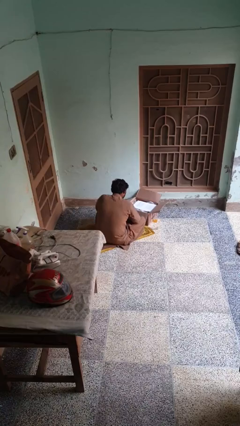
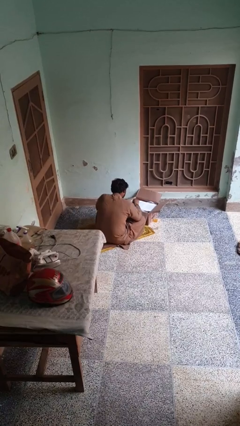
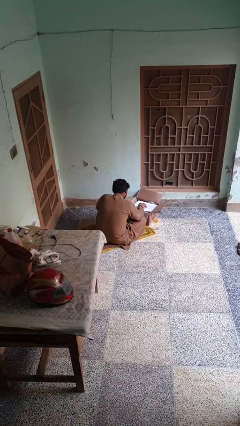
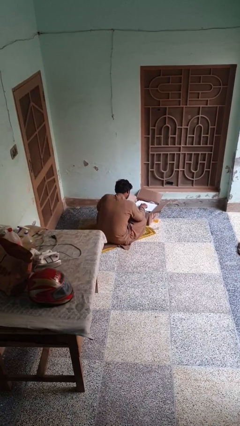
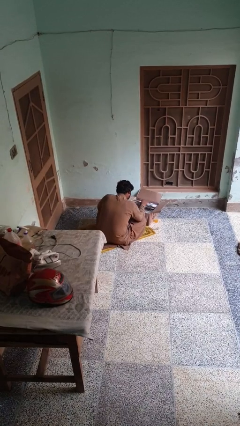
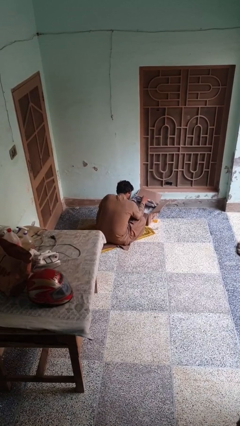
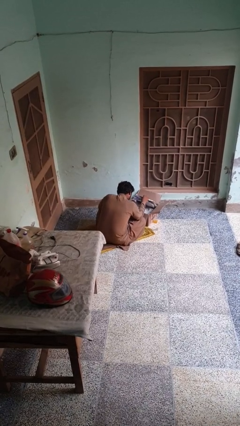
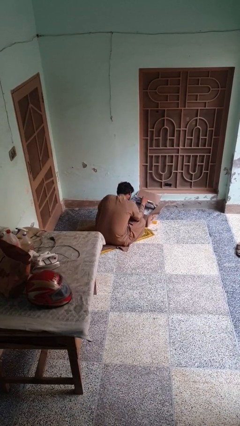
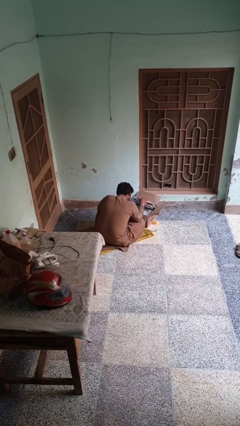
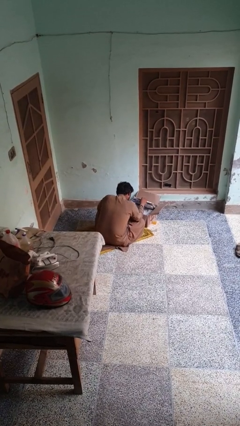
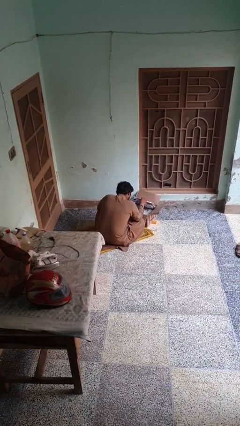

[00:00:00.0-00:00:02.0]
person searches in box

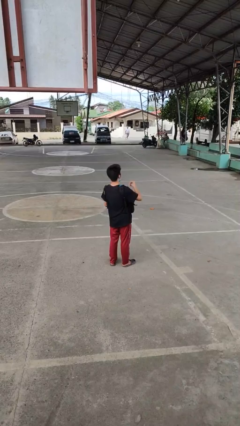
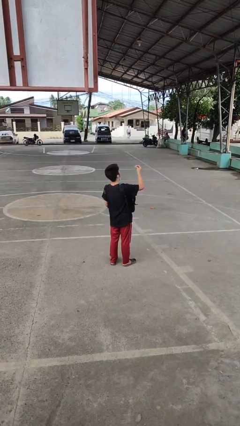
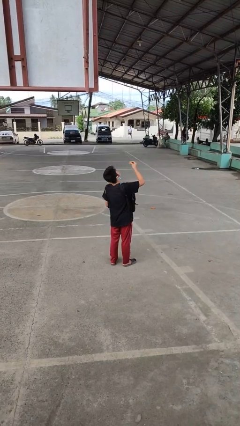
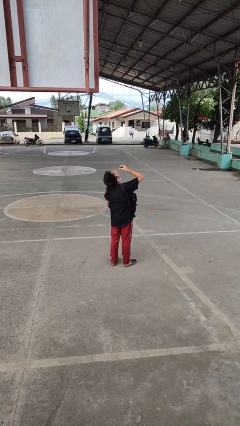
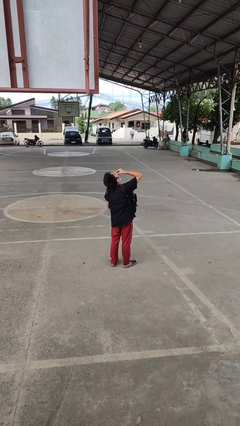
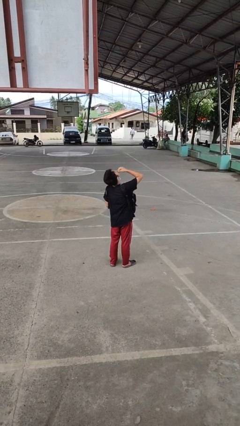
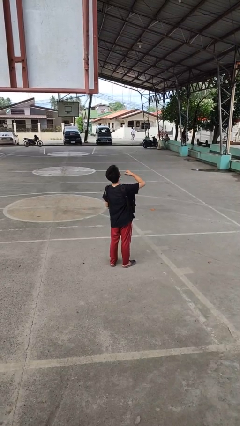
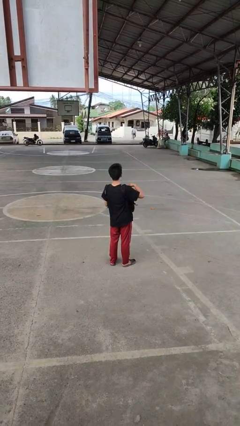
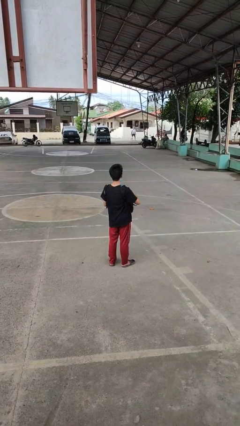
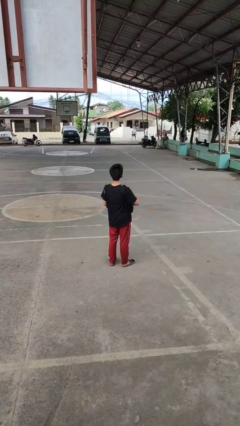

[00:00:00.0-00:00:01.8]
person eats snack from bag

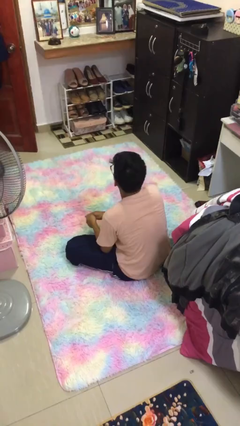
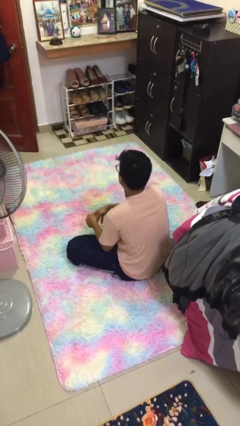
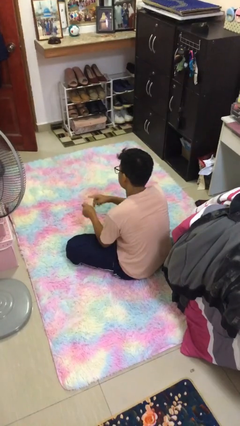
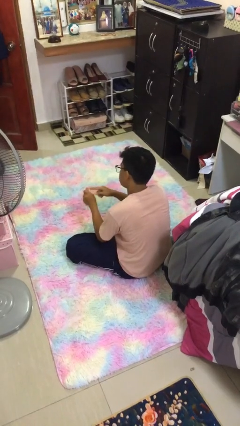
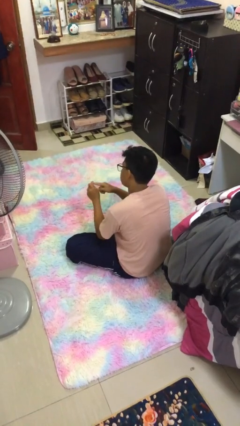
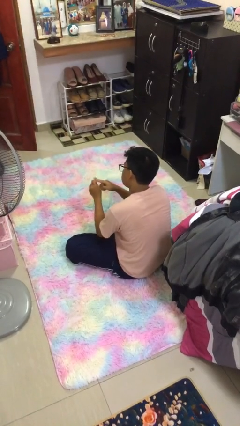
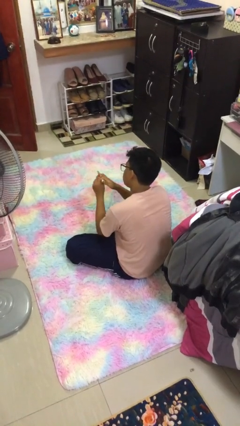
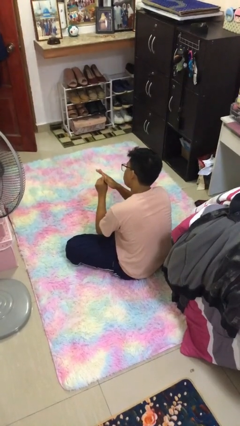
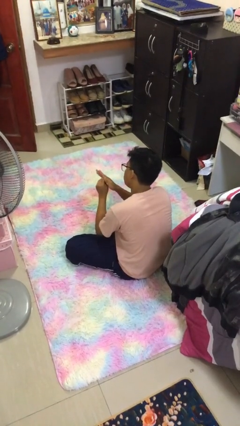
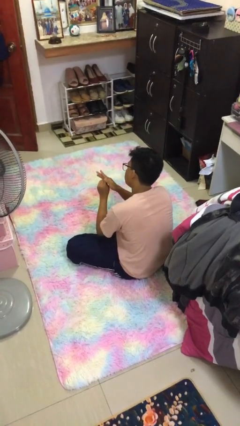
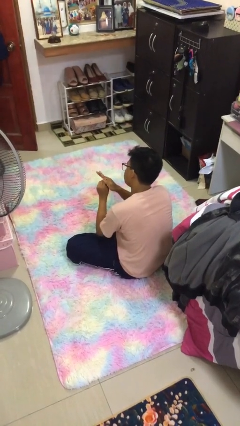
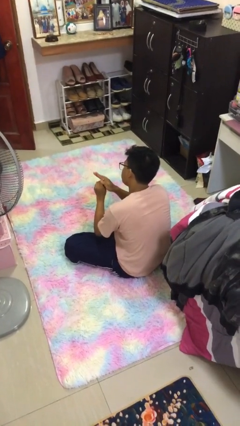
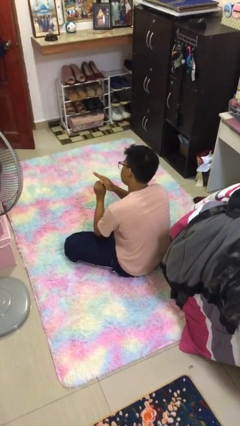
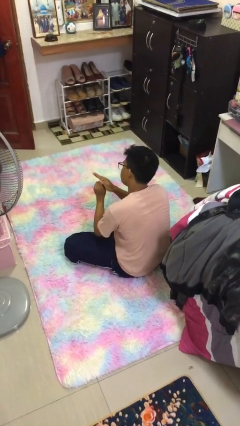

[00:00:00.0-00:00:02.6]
person puts on ring

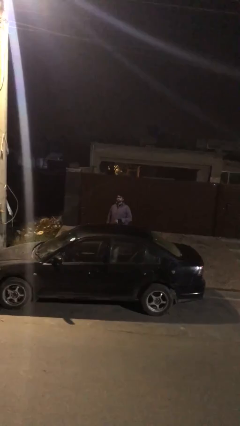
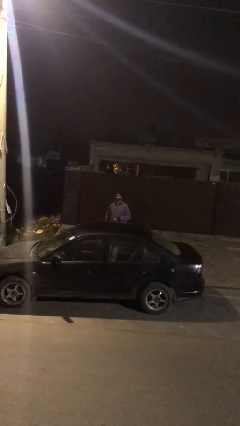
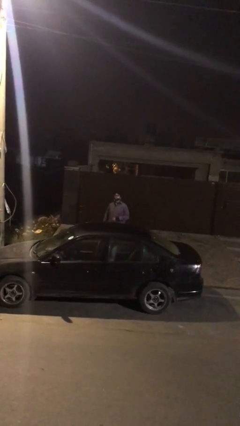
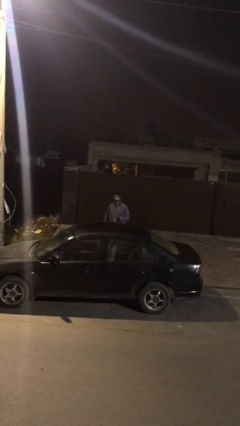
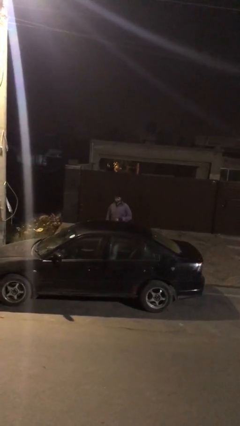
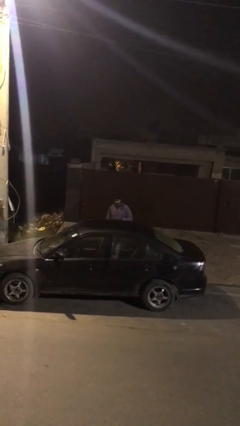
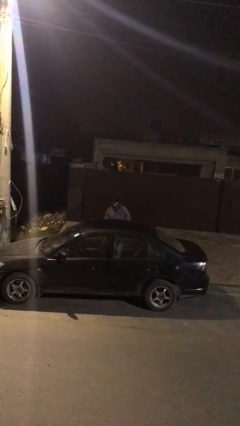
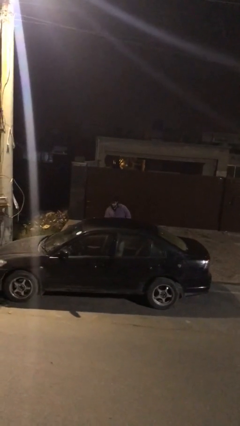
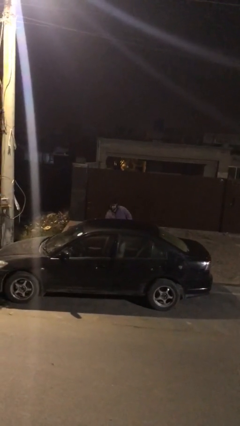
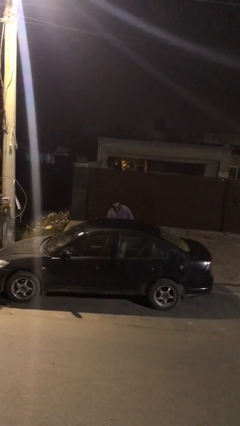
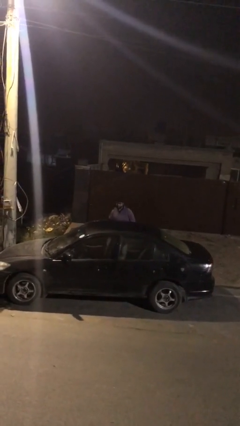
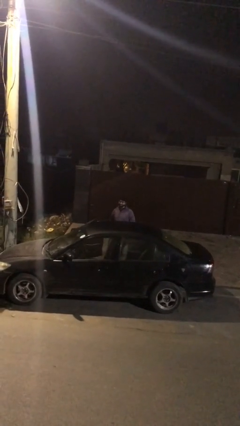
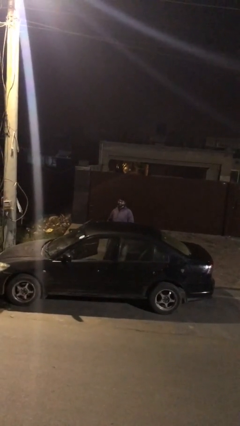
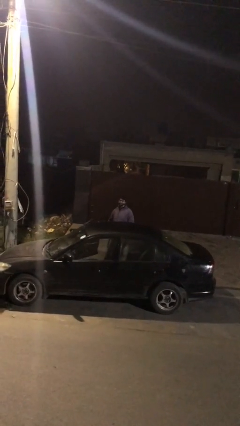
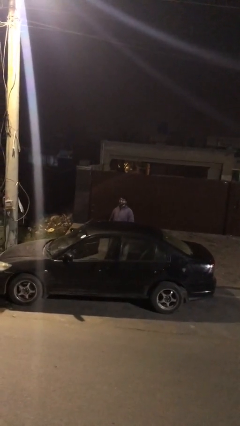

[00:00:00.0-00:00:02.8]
person opens car door

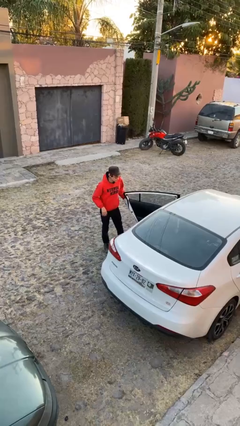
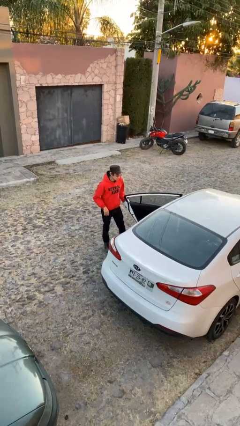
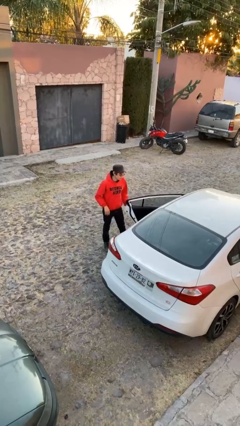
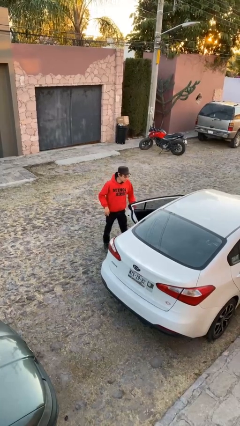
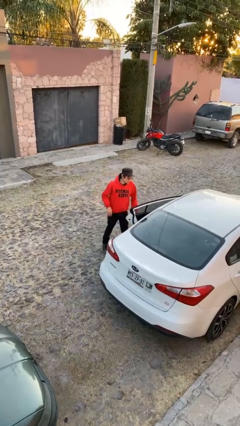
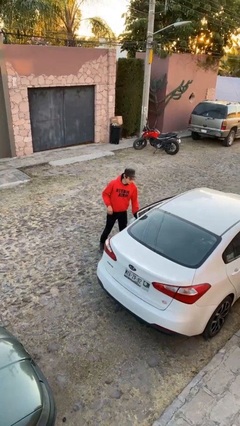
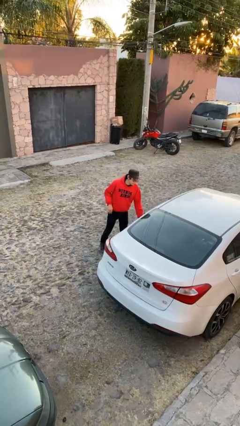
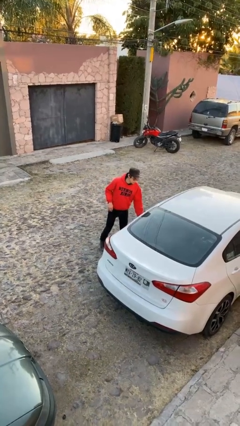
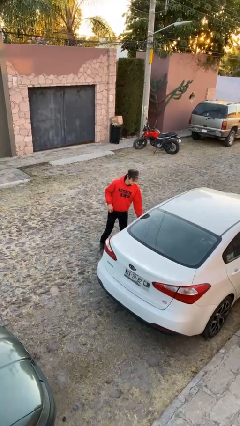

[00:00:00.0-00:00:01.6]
person closes car door

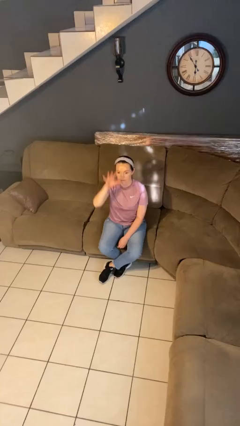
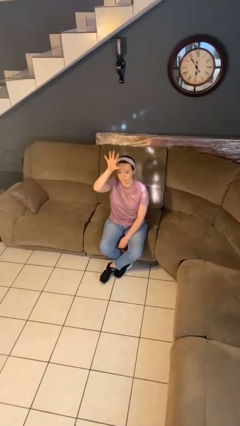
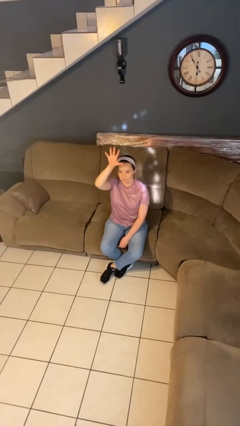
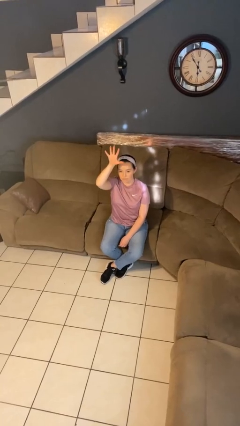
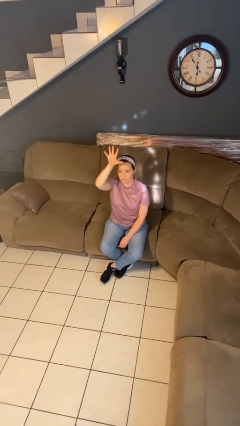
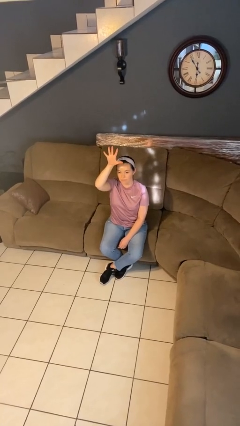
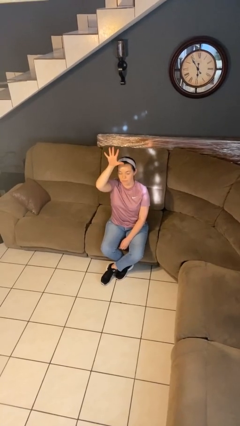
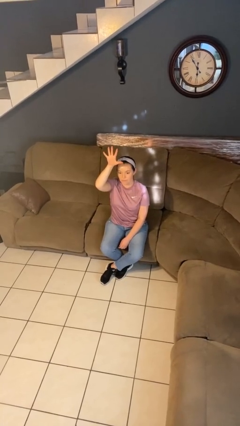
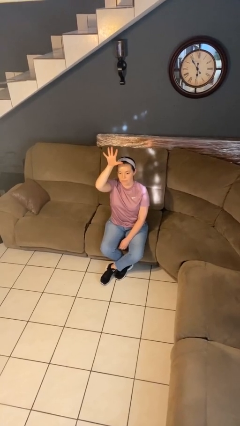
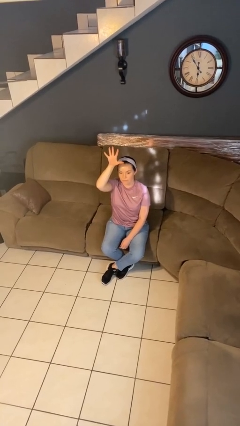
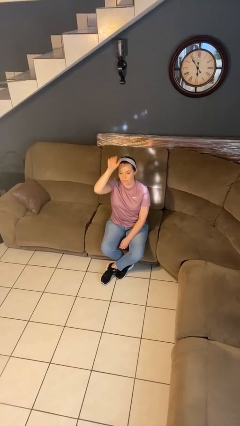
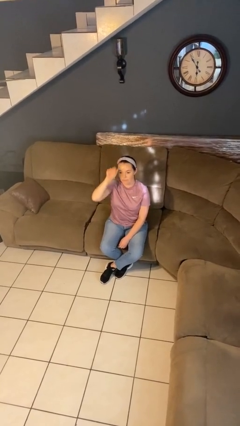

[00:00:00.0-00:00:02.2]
person gestures number five

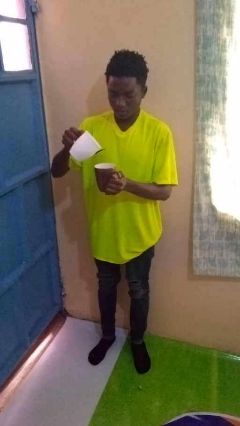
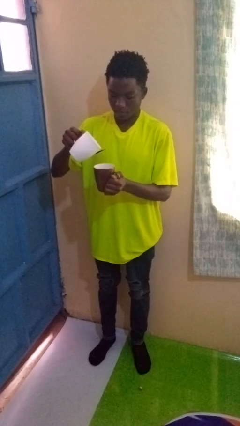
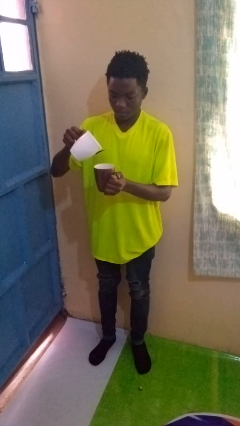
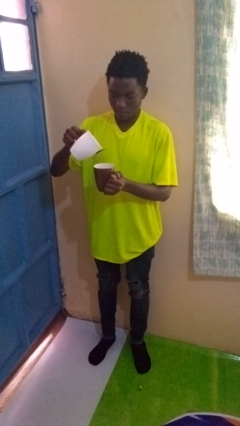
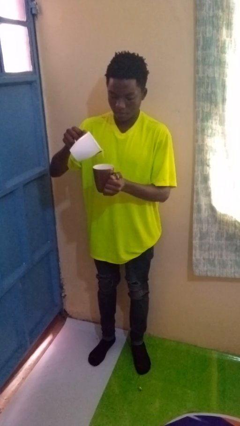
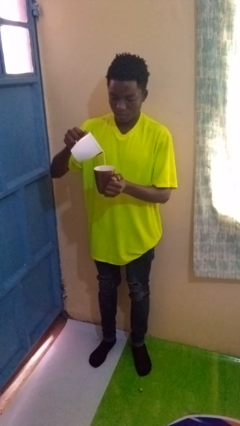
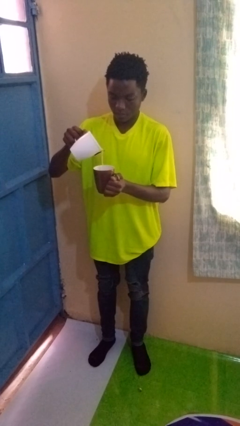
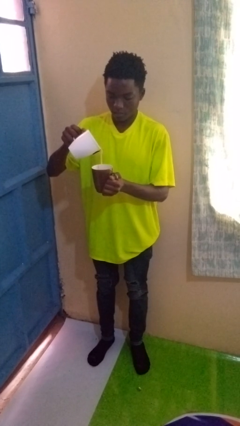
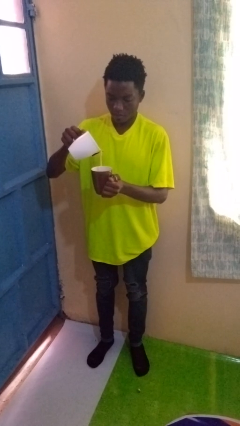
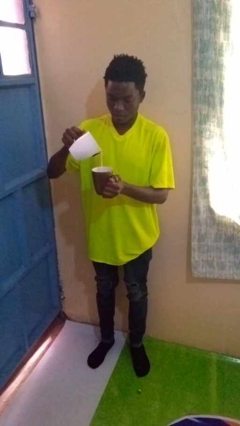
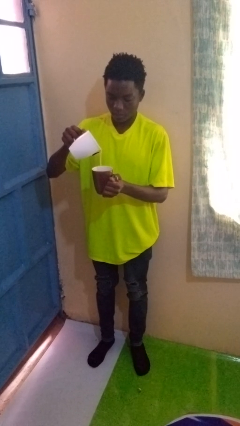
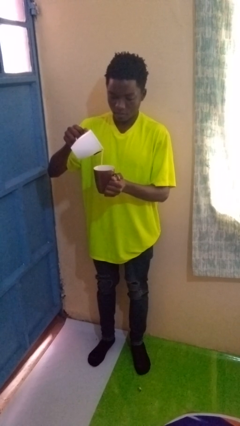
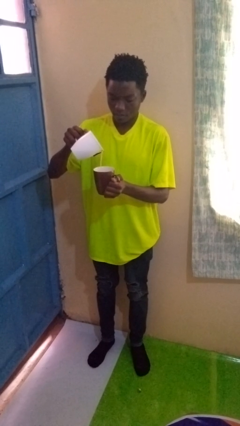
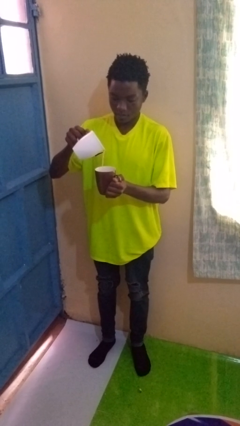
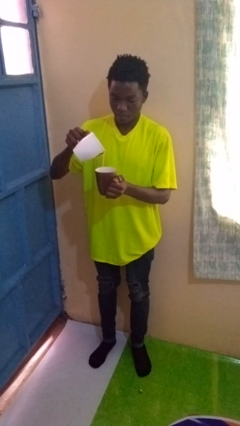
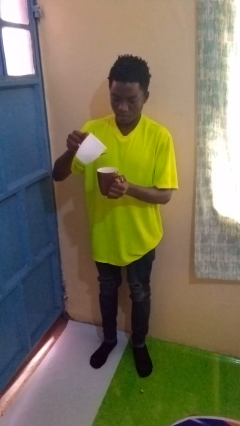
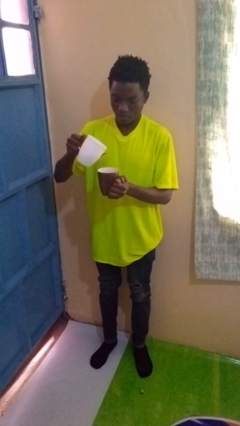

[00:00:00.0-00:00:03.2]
person pours coffee into mug

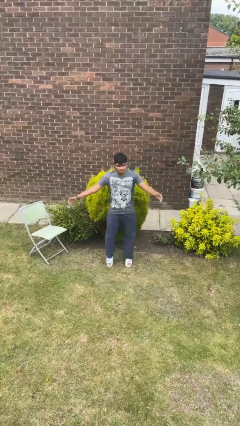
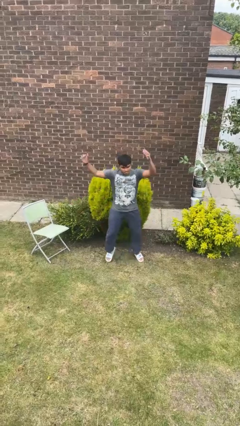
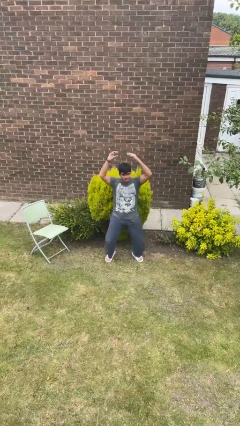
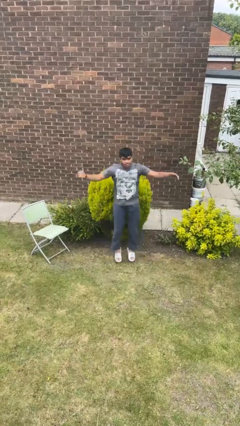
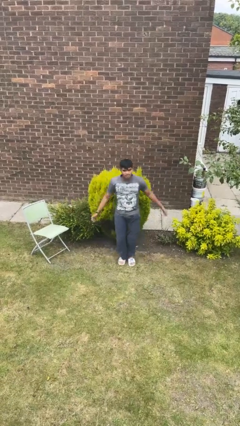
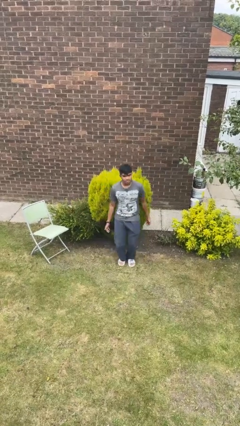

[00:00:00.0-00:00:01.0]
person exercises with jumping jacks
